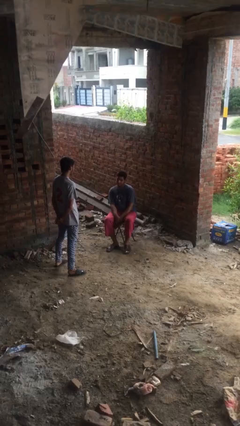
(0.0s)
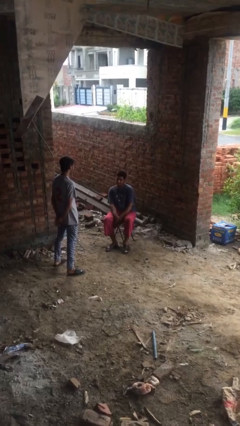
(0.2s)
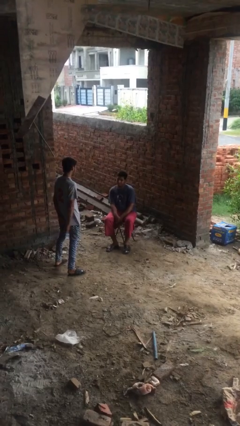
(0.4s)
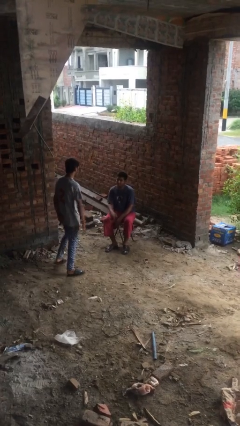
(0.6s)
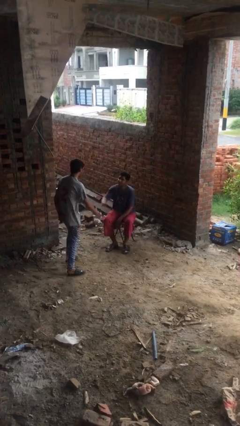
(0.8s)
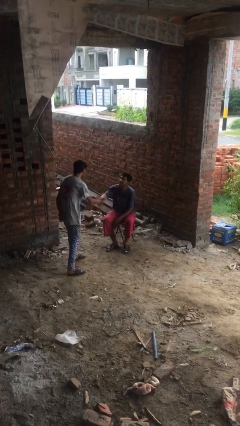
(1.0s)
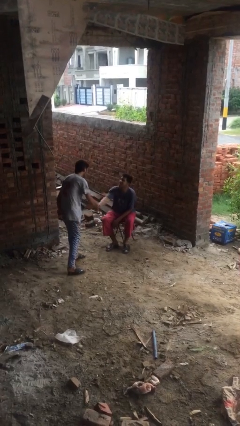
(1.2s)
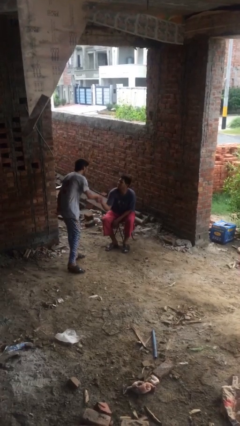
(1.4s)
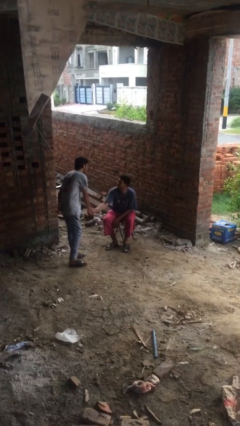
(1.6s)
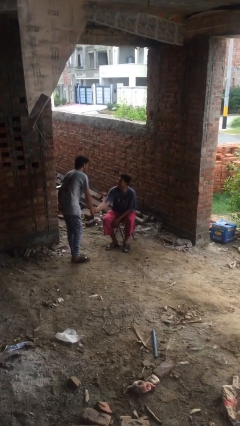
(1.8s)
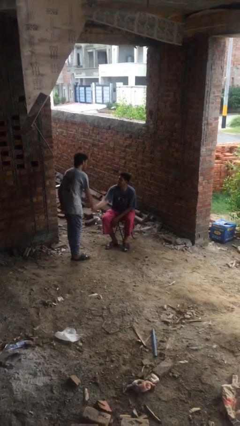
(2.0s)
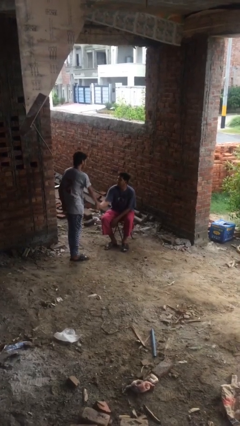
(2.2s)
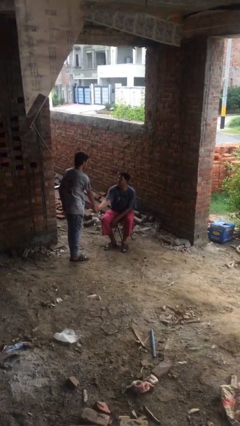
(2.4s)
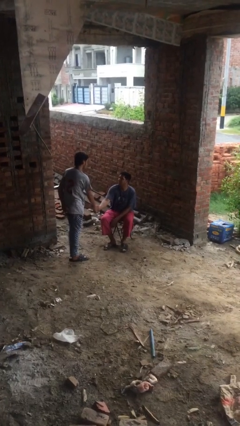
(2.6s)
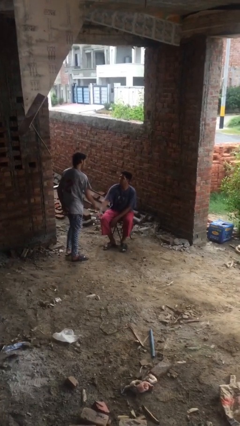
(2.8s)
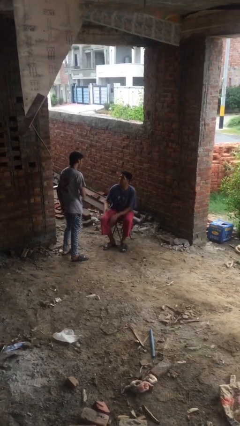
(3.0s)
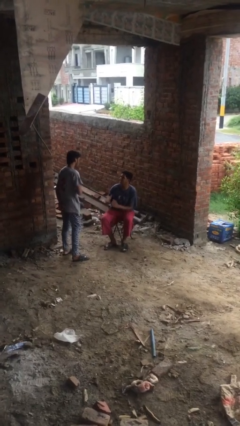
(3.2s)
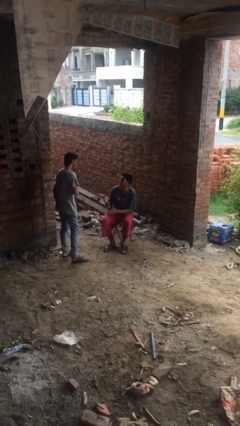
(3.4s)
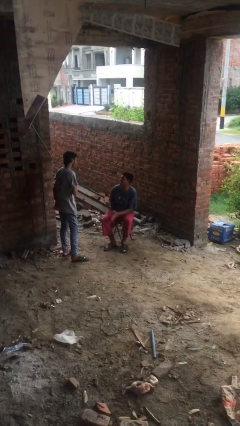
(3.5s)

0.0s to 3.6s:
person shakes hand

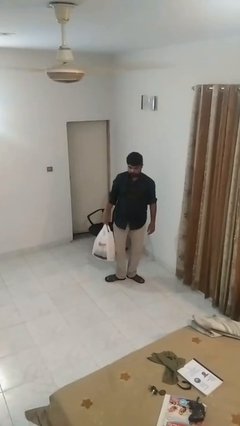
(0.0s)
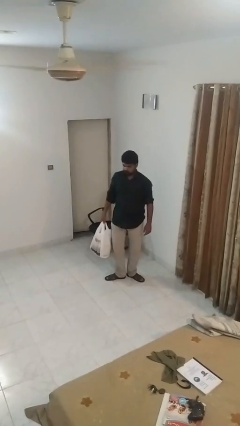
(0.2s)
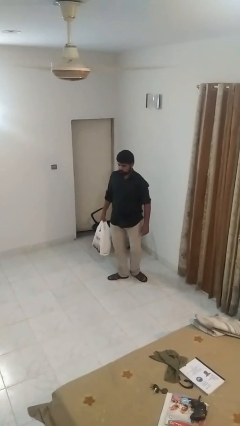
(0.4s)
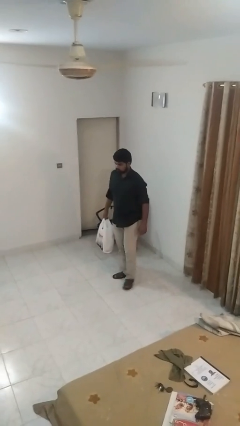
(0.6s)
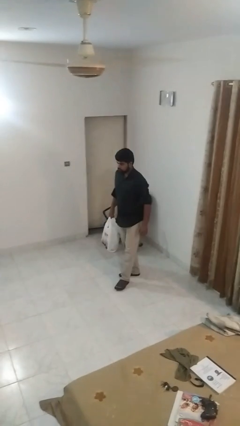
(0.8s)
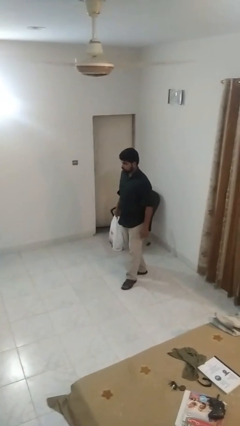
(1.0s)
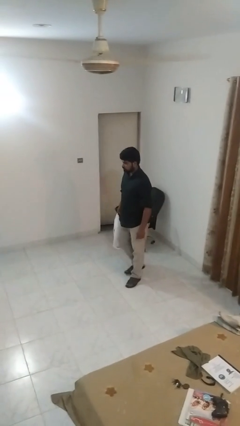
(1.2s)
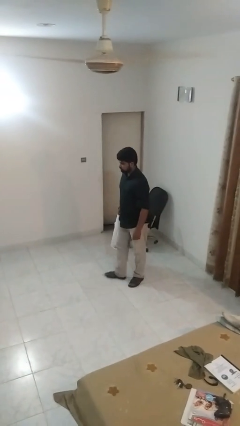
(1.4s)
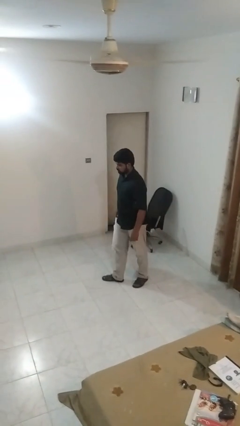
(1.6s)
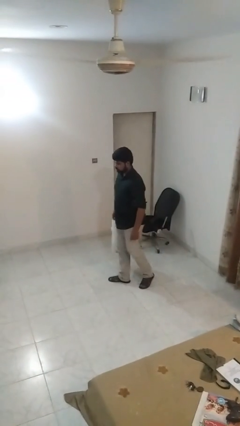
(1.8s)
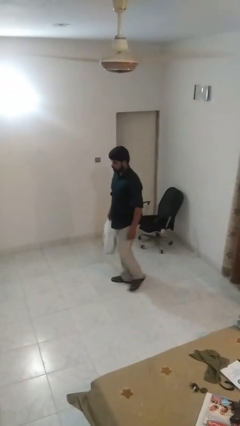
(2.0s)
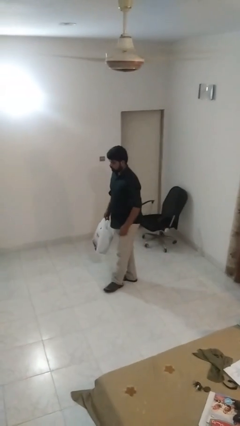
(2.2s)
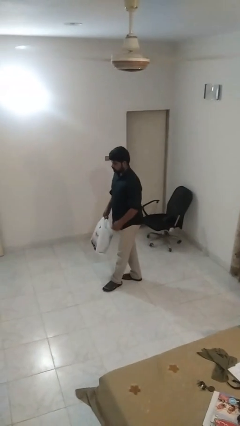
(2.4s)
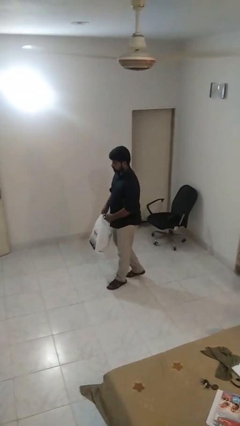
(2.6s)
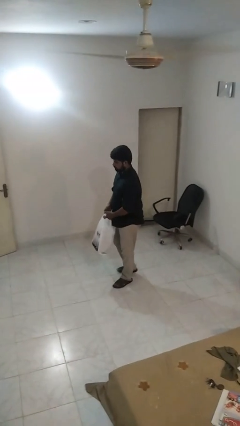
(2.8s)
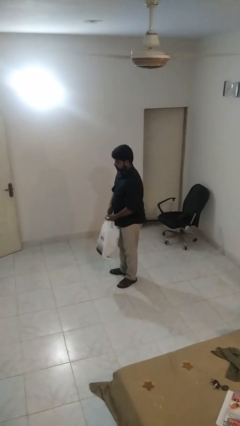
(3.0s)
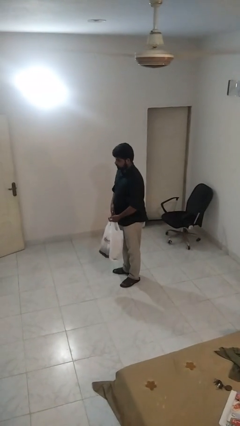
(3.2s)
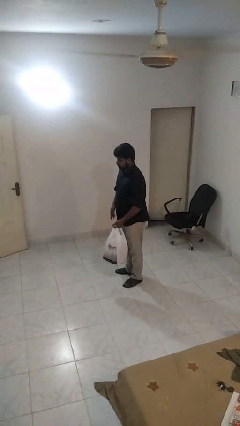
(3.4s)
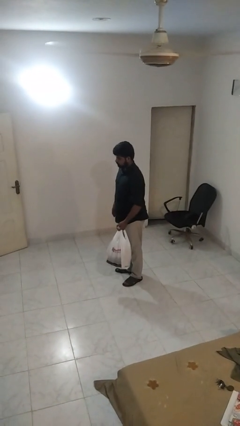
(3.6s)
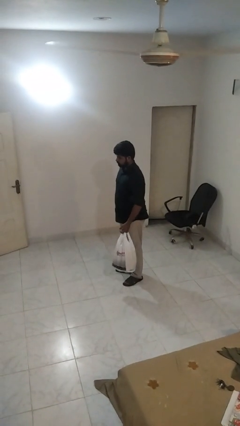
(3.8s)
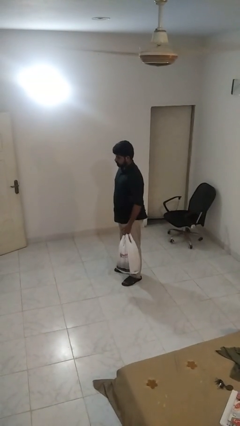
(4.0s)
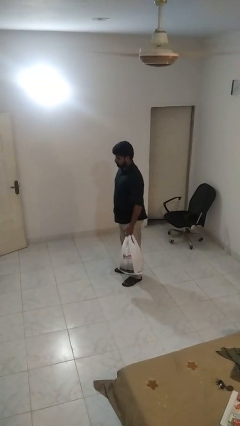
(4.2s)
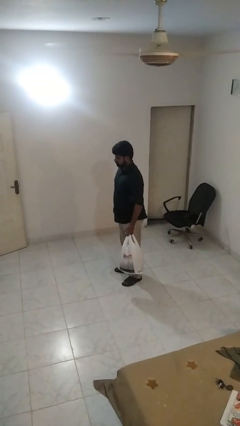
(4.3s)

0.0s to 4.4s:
person carries groceries

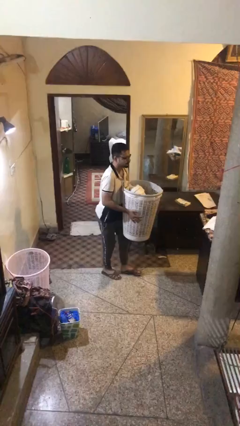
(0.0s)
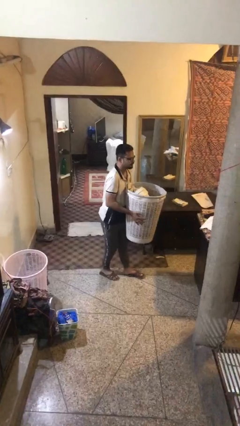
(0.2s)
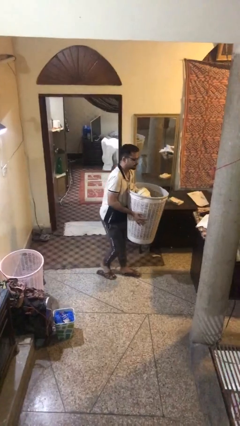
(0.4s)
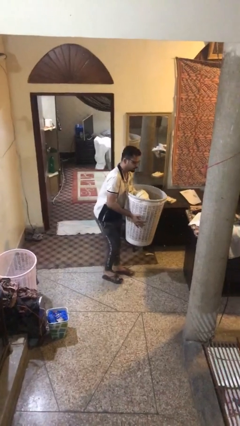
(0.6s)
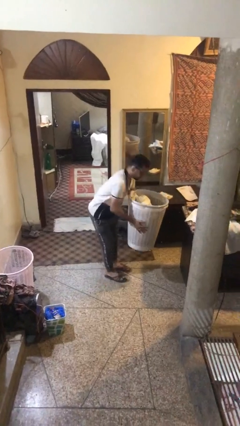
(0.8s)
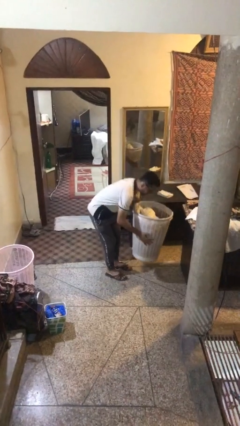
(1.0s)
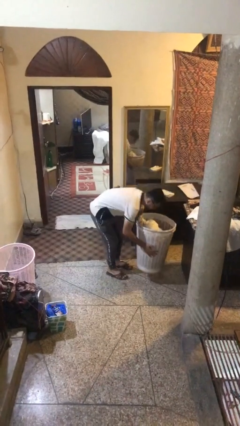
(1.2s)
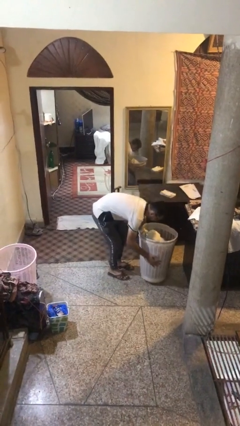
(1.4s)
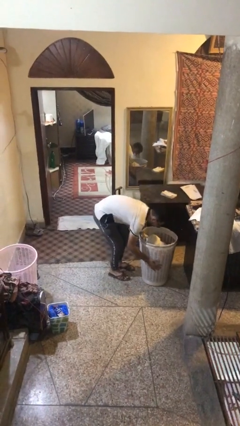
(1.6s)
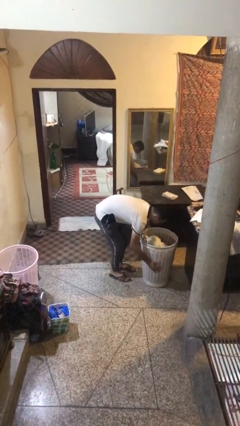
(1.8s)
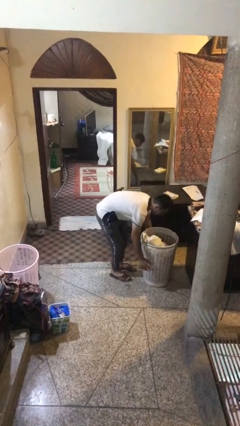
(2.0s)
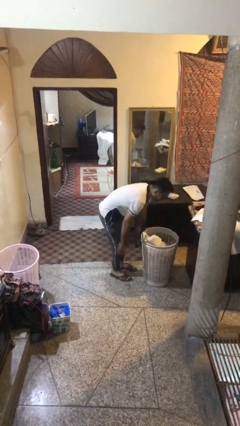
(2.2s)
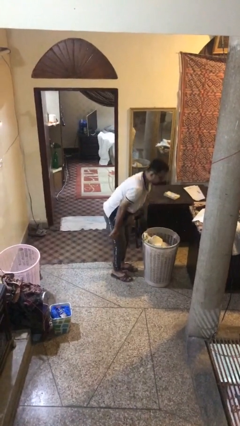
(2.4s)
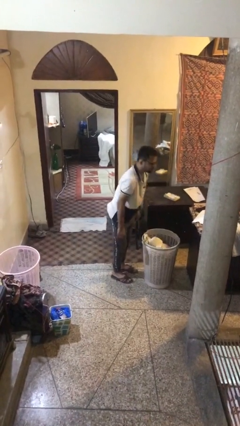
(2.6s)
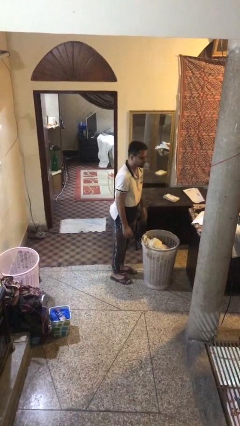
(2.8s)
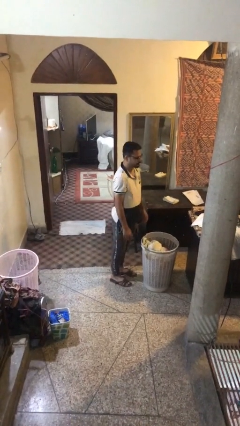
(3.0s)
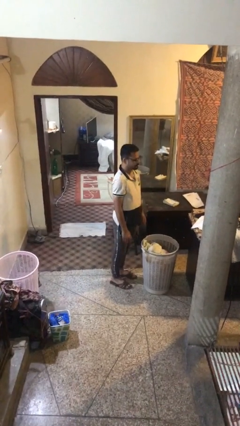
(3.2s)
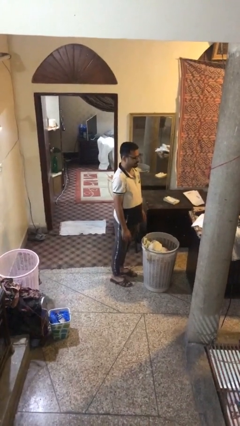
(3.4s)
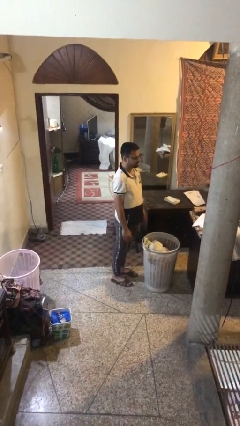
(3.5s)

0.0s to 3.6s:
person puts down object on floor

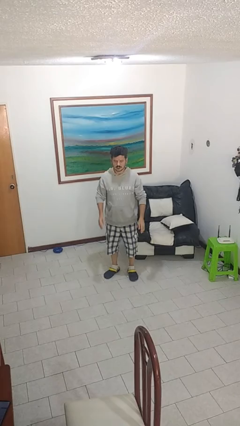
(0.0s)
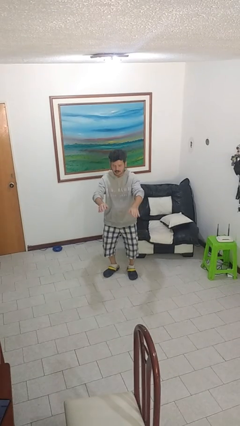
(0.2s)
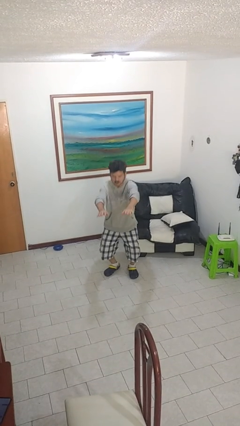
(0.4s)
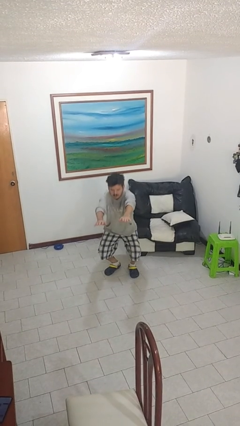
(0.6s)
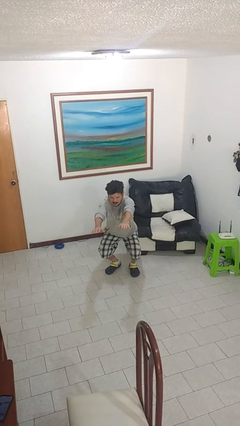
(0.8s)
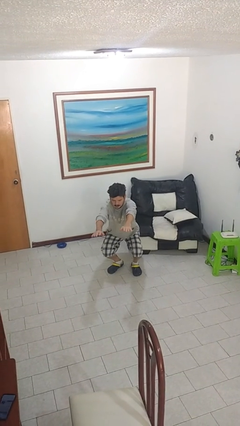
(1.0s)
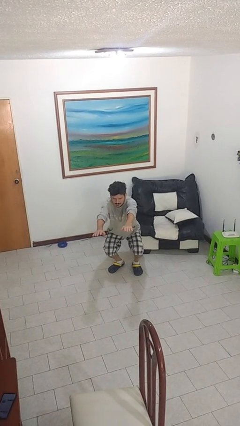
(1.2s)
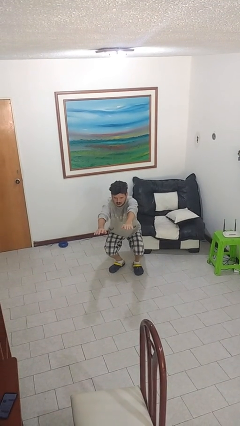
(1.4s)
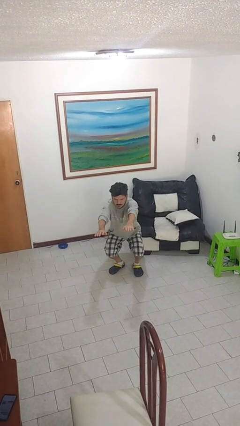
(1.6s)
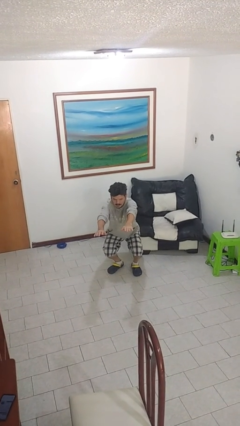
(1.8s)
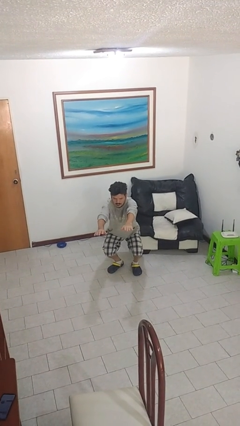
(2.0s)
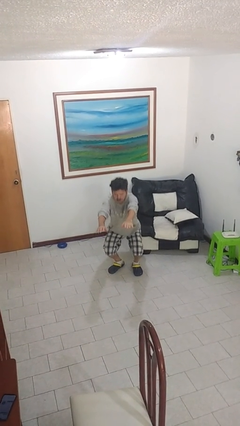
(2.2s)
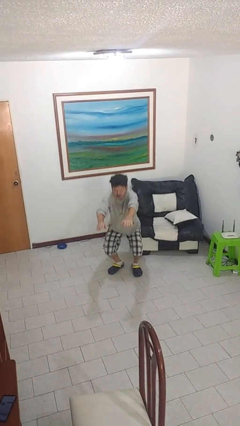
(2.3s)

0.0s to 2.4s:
person squats

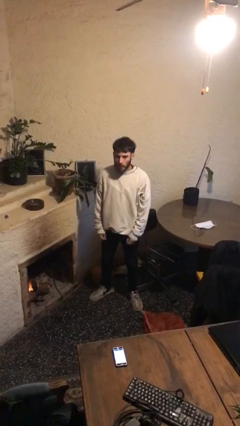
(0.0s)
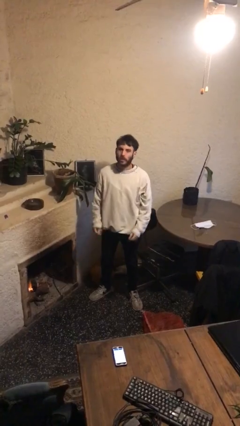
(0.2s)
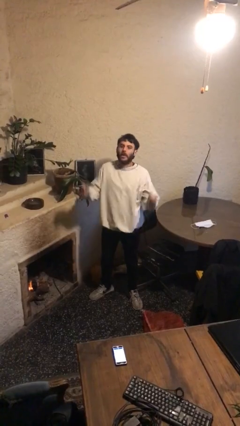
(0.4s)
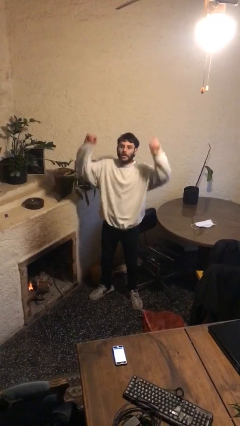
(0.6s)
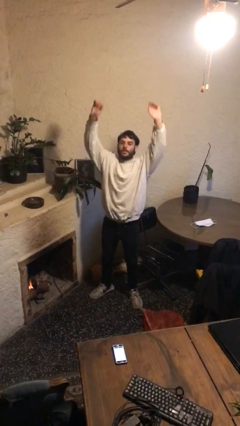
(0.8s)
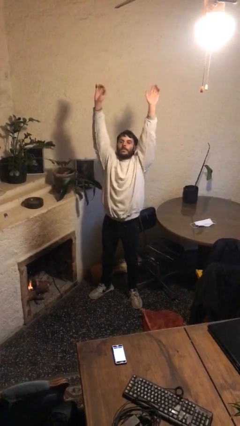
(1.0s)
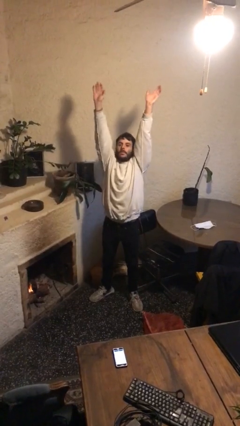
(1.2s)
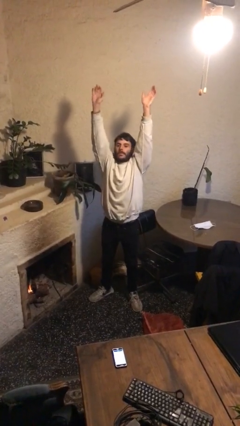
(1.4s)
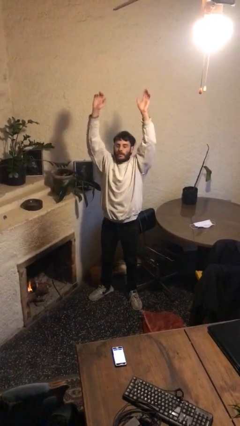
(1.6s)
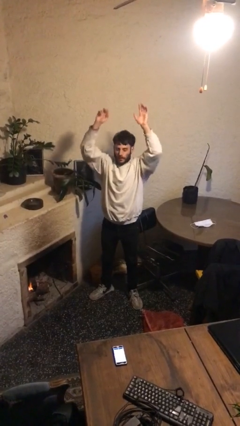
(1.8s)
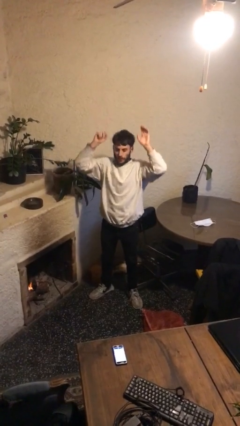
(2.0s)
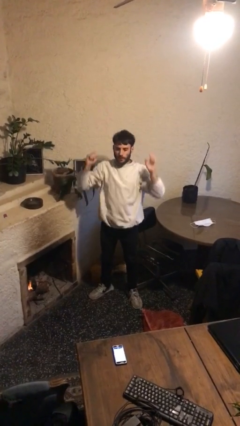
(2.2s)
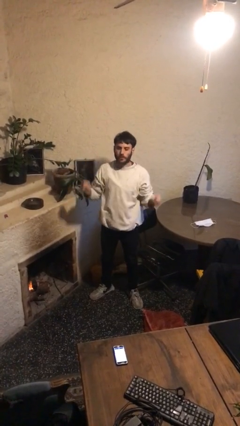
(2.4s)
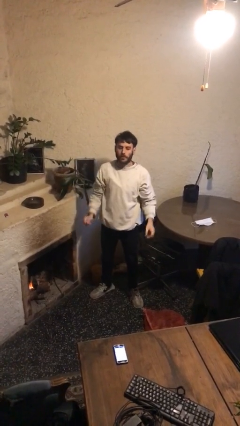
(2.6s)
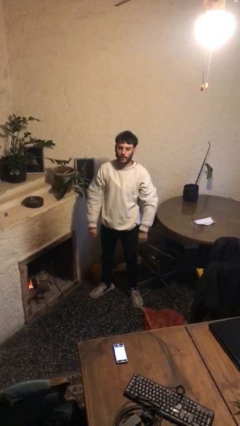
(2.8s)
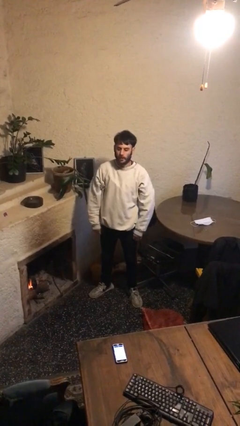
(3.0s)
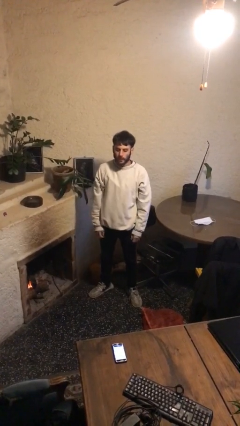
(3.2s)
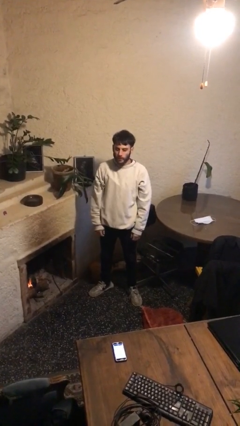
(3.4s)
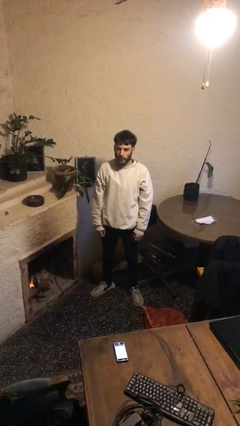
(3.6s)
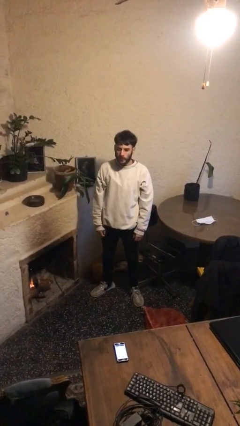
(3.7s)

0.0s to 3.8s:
person stretches arms over head
